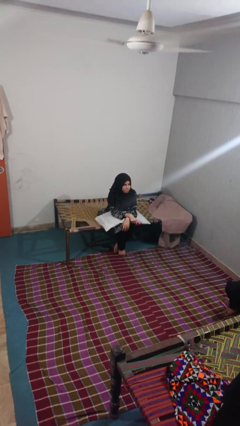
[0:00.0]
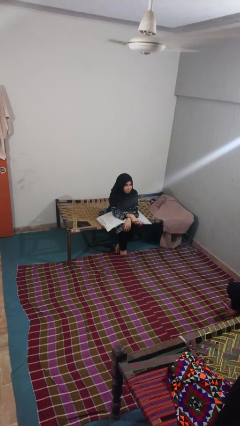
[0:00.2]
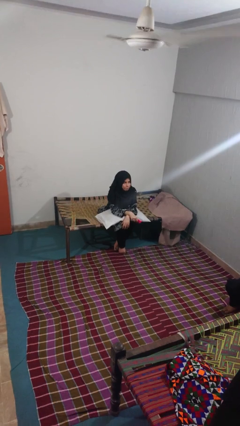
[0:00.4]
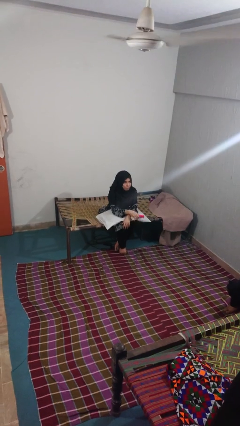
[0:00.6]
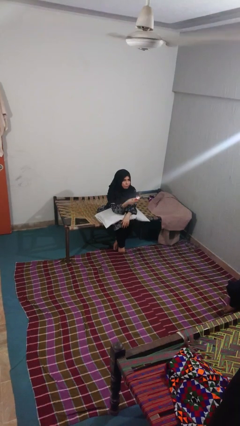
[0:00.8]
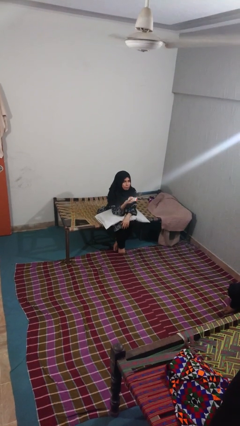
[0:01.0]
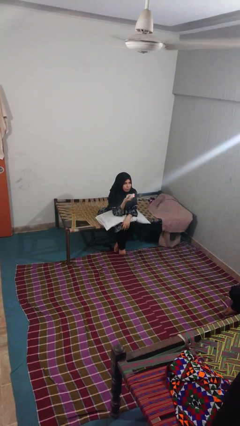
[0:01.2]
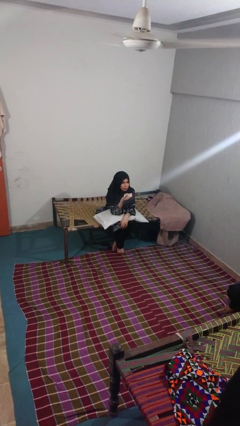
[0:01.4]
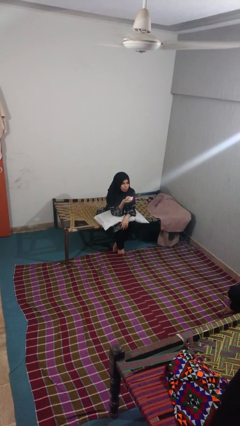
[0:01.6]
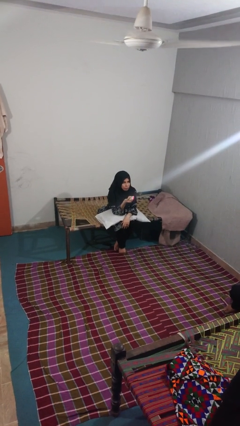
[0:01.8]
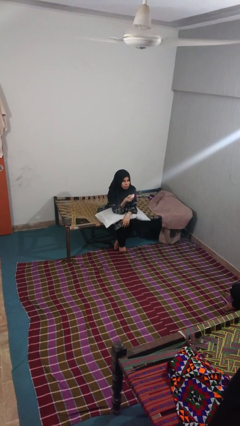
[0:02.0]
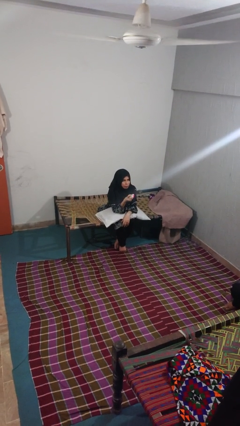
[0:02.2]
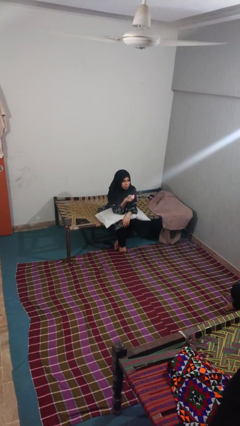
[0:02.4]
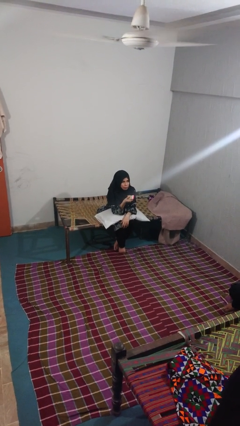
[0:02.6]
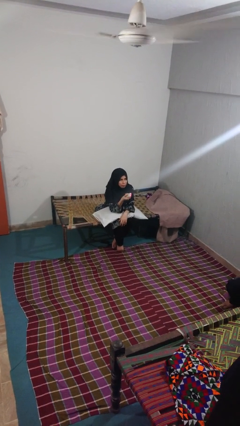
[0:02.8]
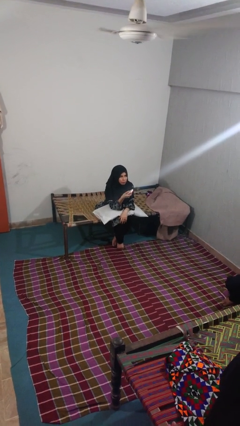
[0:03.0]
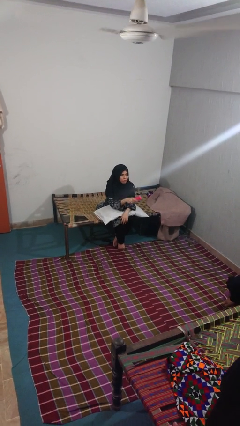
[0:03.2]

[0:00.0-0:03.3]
person uses television remote

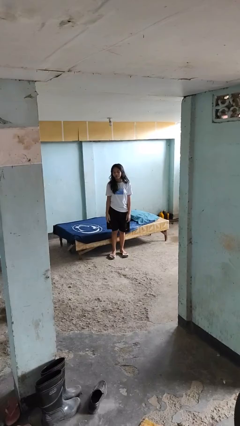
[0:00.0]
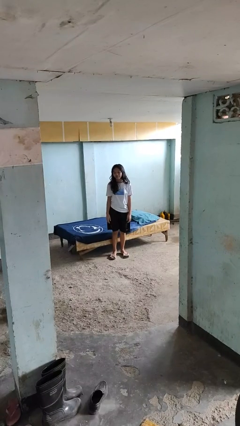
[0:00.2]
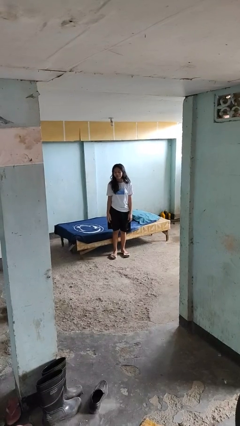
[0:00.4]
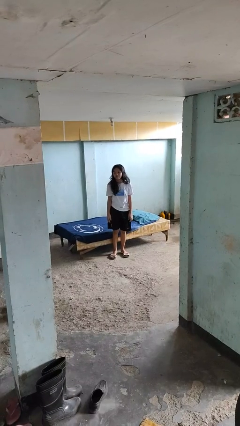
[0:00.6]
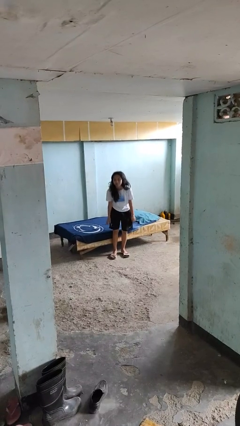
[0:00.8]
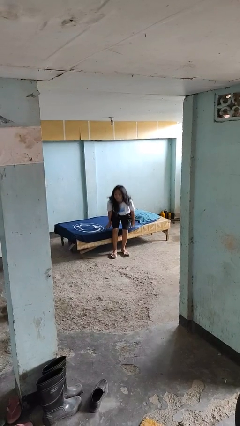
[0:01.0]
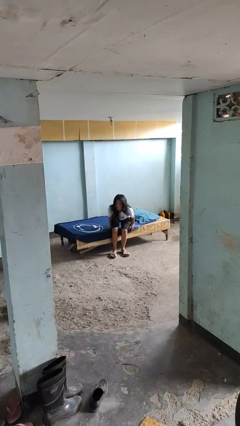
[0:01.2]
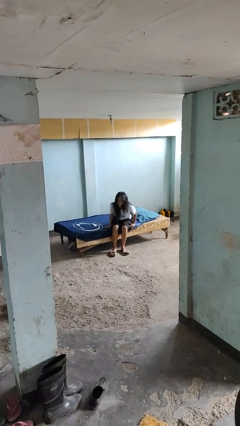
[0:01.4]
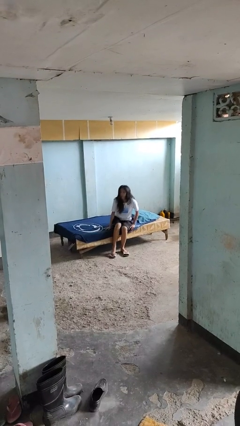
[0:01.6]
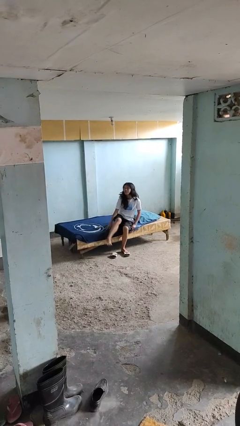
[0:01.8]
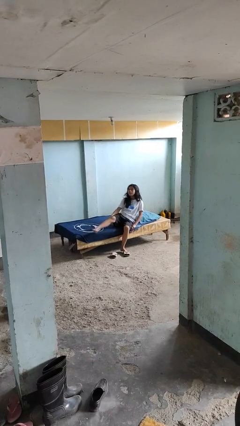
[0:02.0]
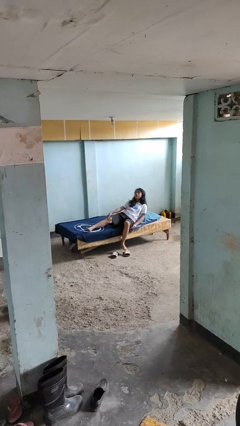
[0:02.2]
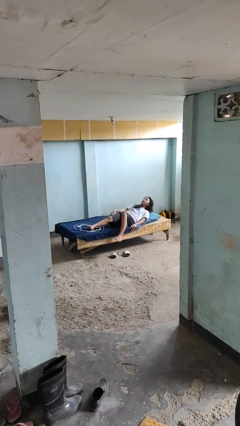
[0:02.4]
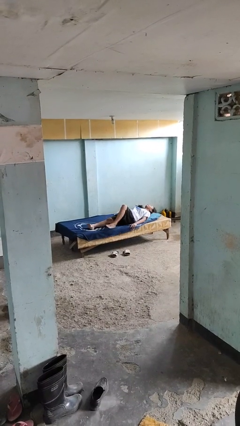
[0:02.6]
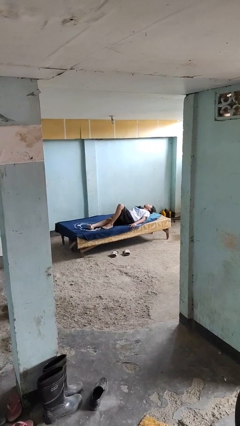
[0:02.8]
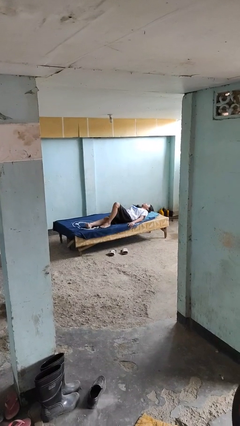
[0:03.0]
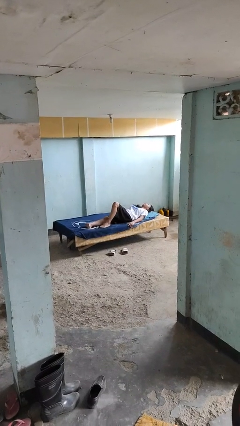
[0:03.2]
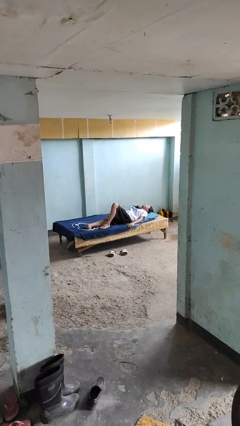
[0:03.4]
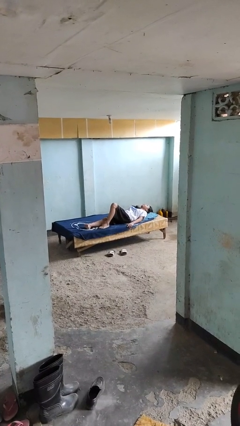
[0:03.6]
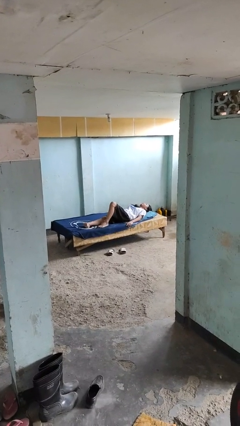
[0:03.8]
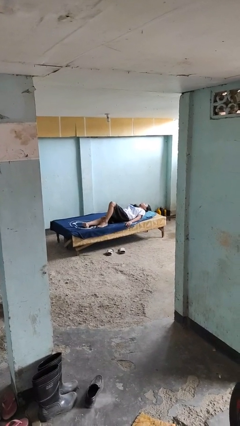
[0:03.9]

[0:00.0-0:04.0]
person lies down on bed

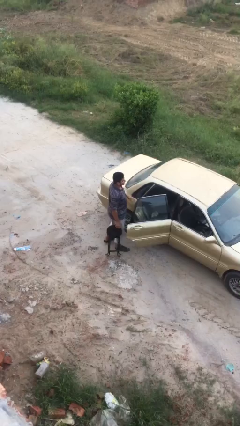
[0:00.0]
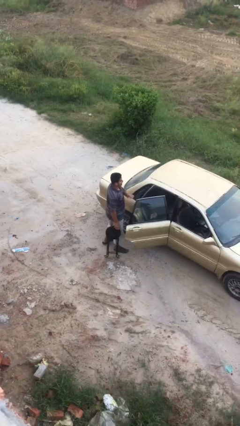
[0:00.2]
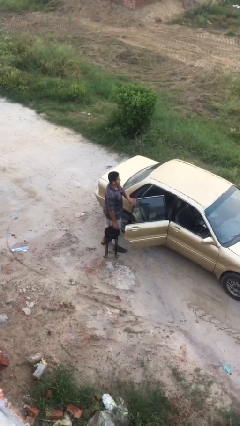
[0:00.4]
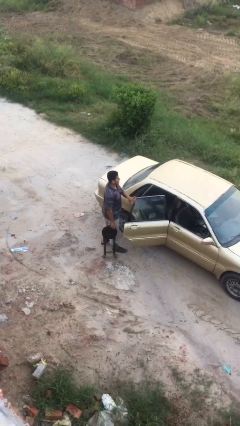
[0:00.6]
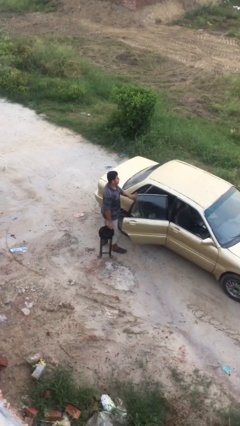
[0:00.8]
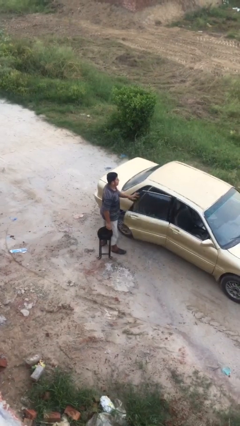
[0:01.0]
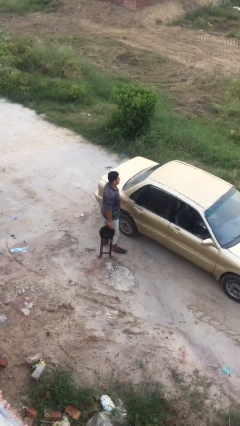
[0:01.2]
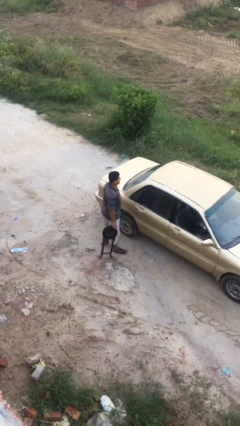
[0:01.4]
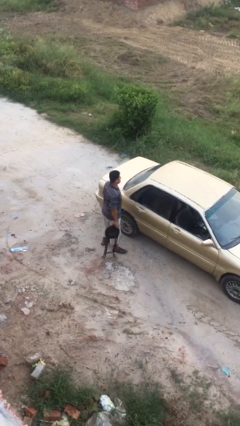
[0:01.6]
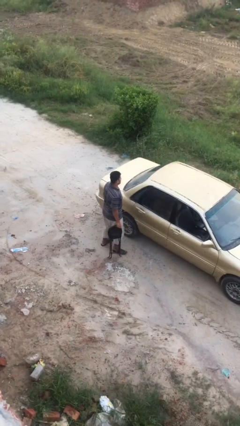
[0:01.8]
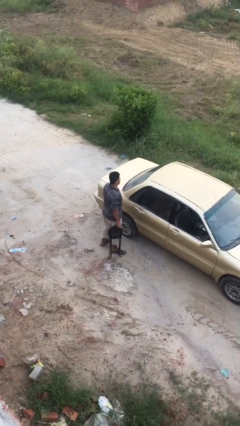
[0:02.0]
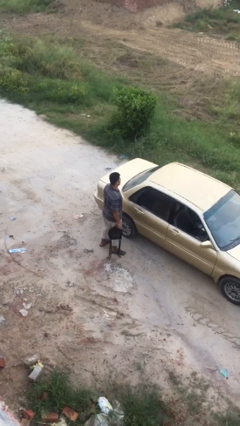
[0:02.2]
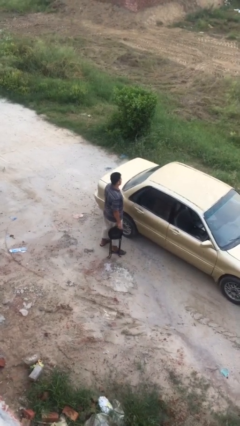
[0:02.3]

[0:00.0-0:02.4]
person closes car door

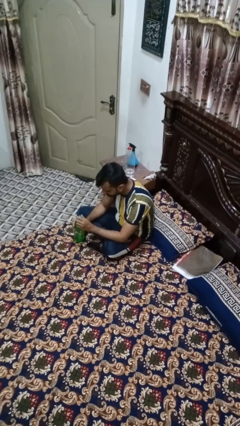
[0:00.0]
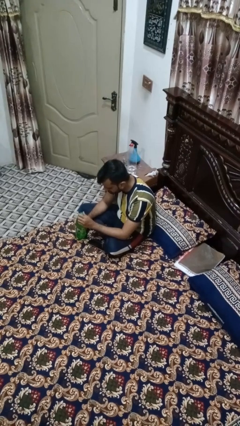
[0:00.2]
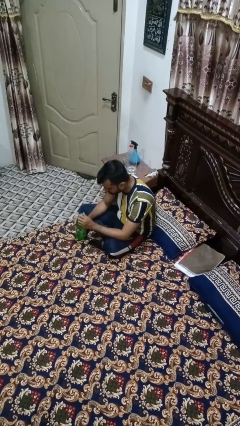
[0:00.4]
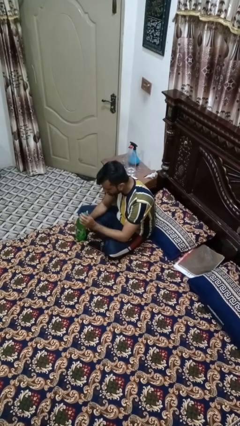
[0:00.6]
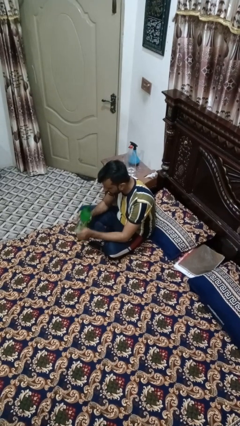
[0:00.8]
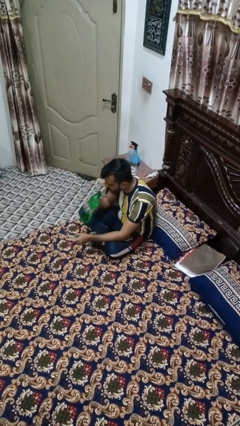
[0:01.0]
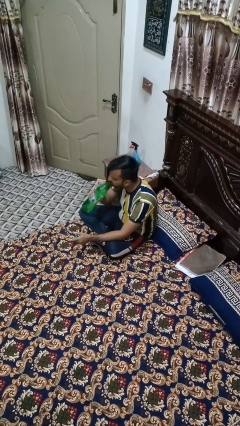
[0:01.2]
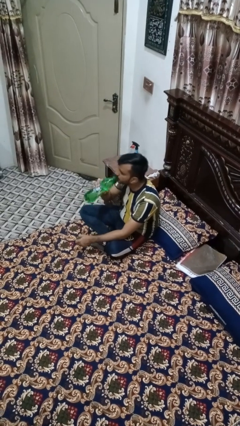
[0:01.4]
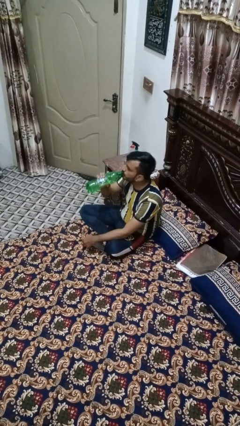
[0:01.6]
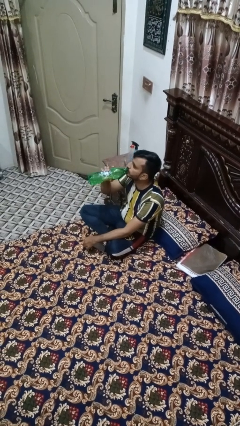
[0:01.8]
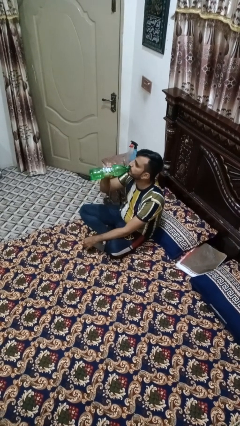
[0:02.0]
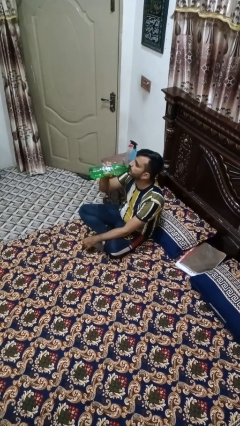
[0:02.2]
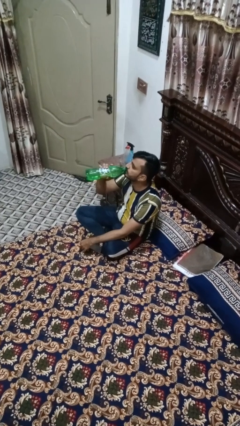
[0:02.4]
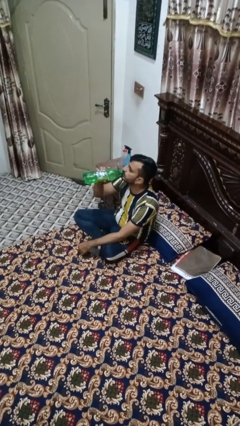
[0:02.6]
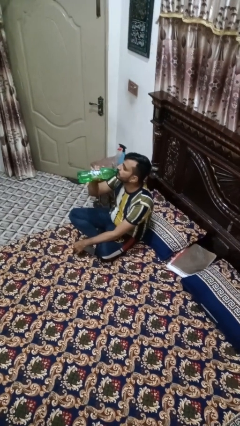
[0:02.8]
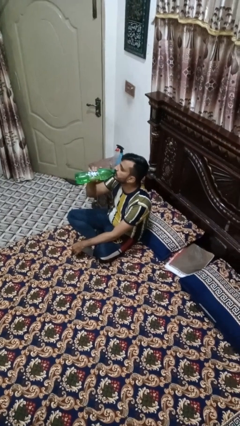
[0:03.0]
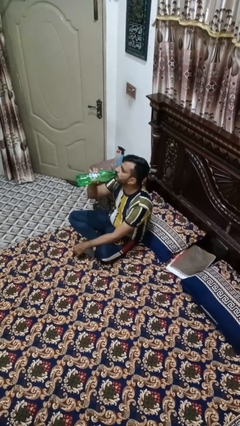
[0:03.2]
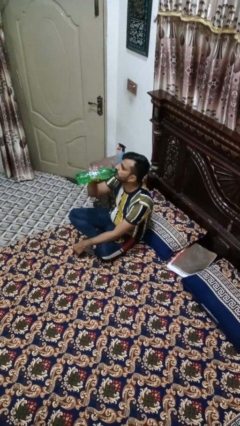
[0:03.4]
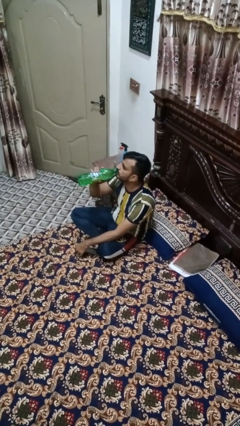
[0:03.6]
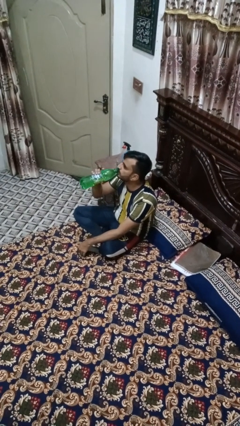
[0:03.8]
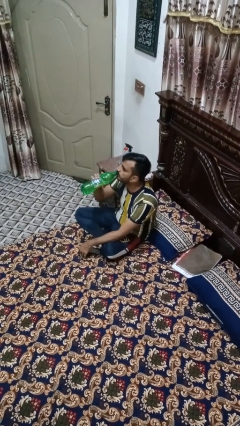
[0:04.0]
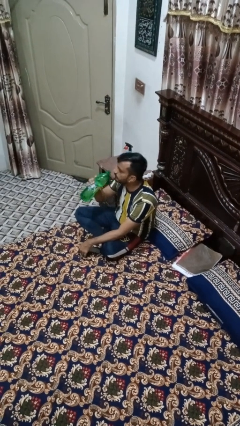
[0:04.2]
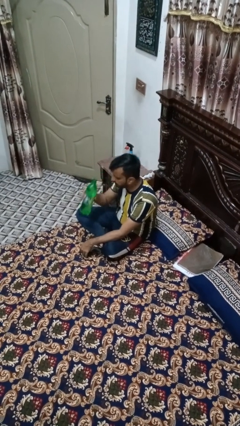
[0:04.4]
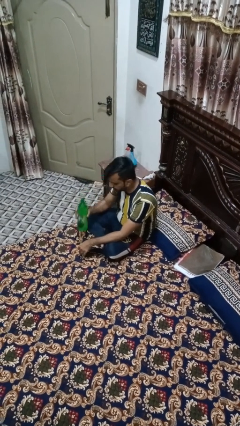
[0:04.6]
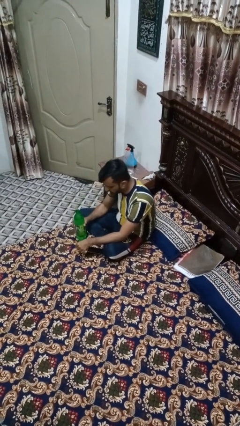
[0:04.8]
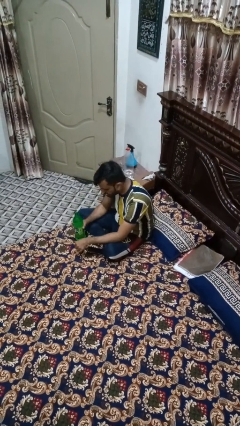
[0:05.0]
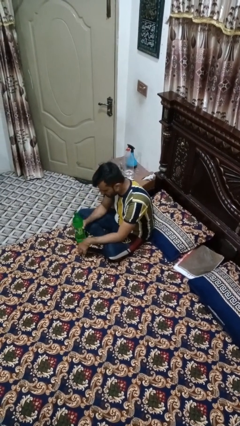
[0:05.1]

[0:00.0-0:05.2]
person drinks from bottle

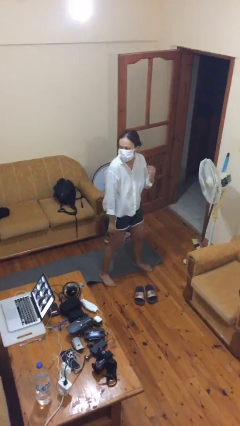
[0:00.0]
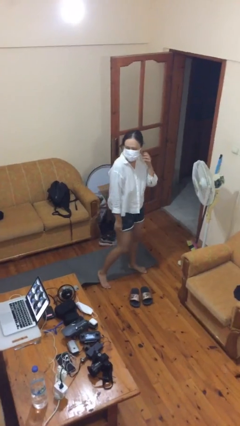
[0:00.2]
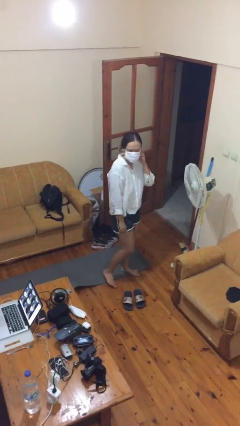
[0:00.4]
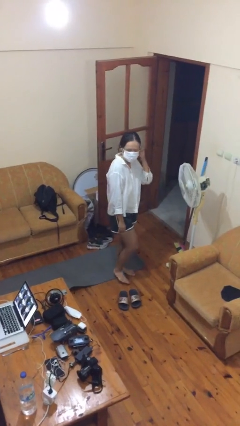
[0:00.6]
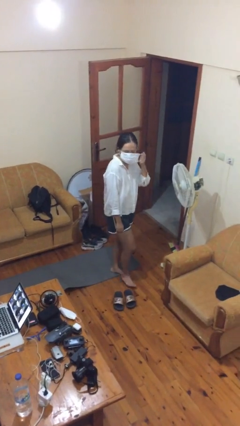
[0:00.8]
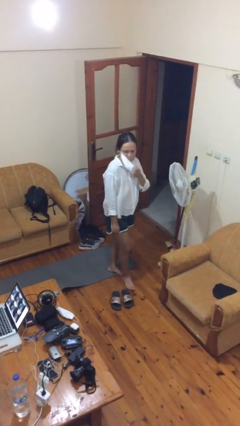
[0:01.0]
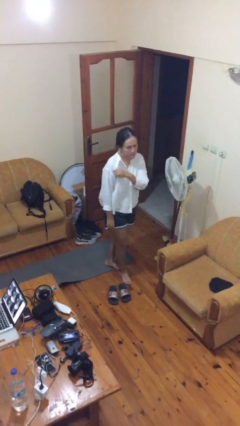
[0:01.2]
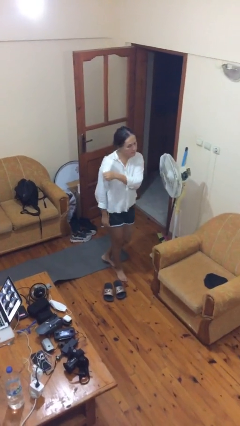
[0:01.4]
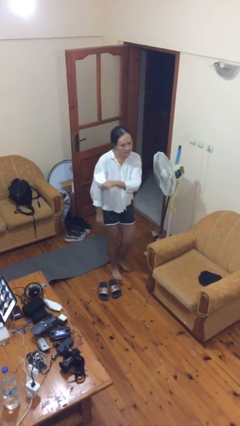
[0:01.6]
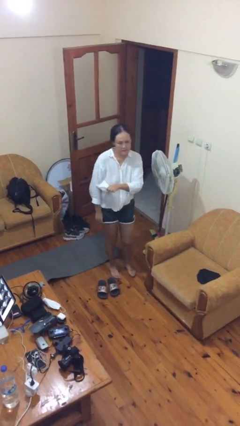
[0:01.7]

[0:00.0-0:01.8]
person takes off facemask

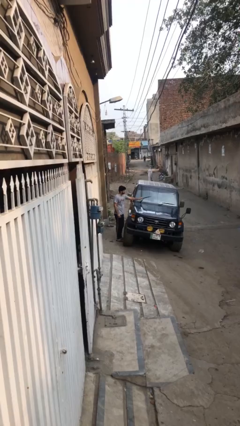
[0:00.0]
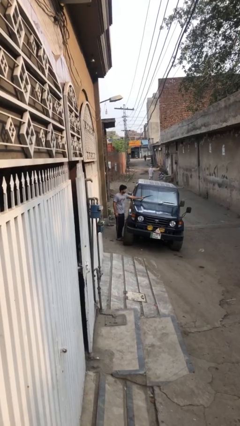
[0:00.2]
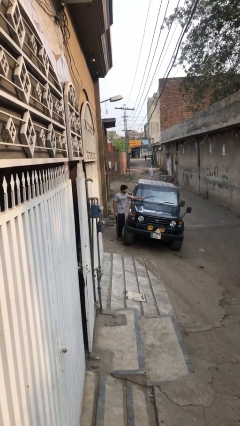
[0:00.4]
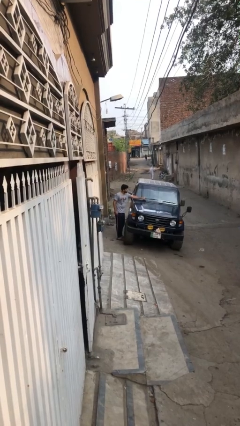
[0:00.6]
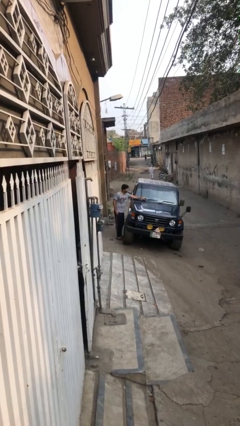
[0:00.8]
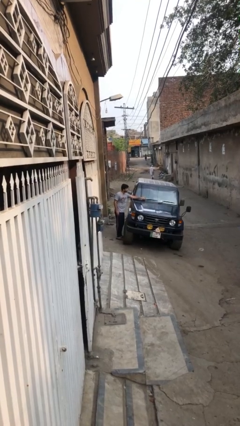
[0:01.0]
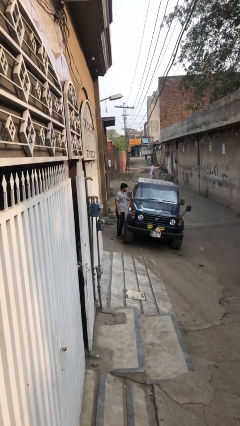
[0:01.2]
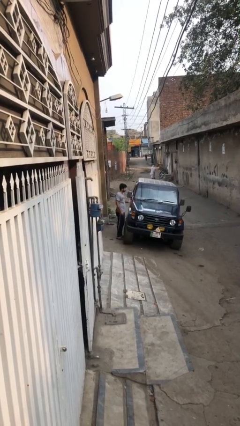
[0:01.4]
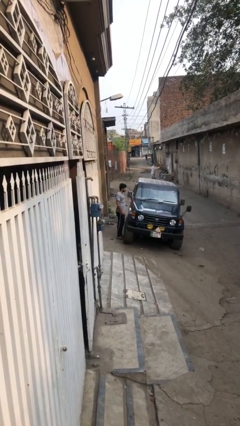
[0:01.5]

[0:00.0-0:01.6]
person flips down car wipers
